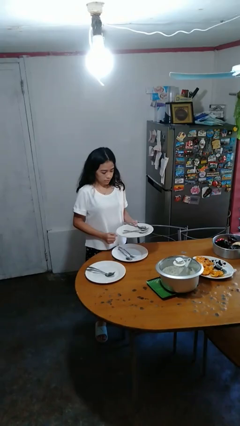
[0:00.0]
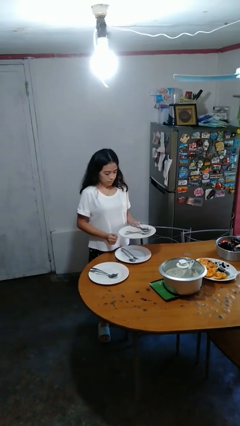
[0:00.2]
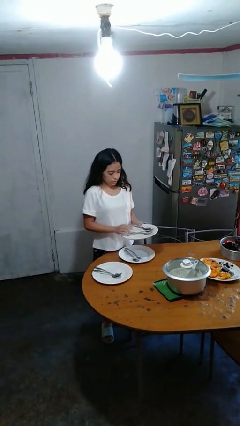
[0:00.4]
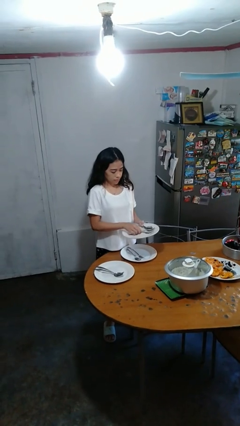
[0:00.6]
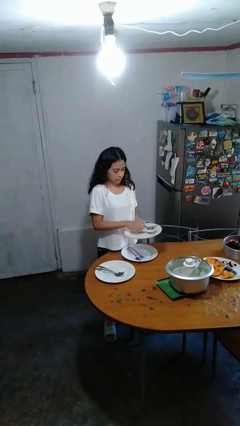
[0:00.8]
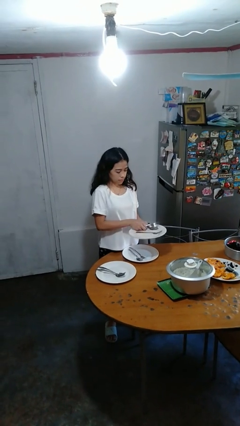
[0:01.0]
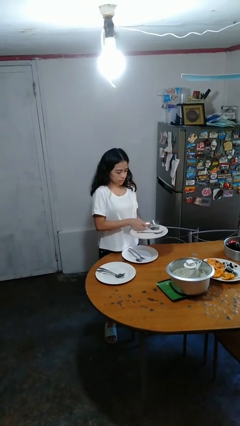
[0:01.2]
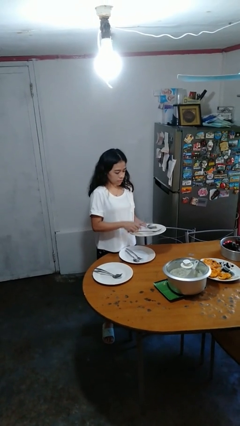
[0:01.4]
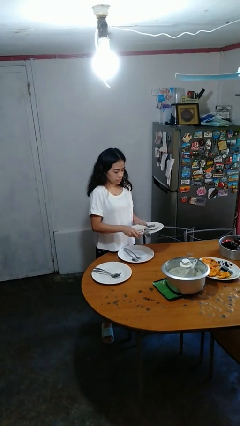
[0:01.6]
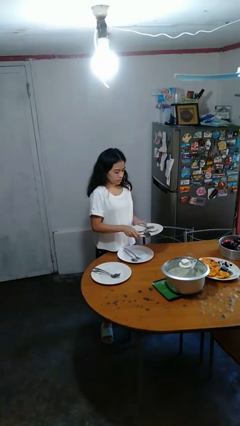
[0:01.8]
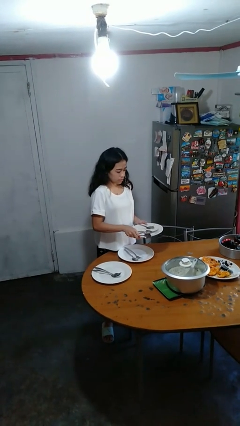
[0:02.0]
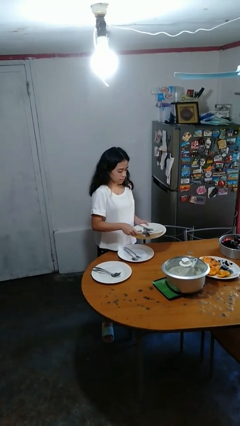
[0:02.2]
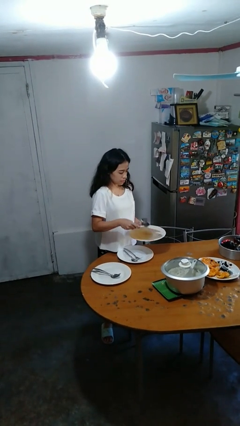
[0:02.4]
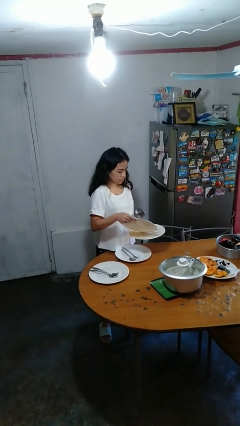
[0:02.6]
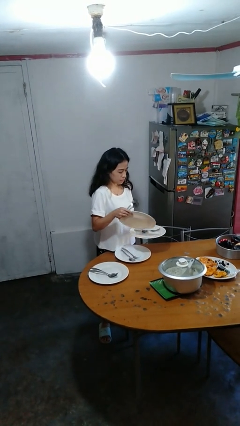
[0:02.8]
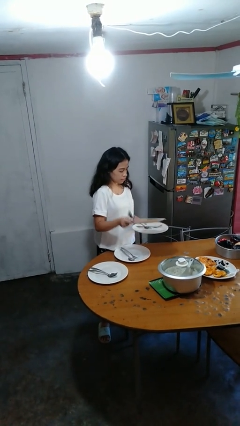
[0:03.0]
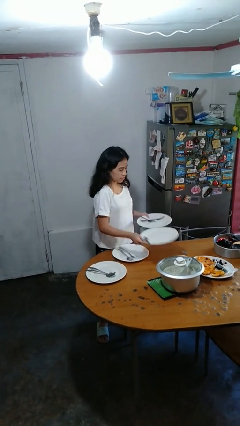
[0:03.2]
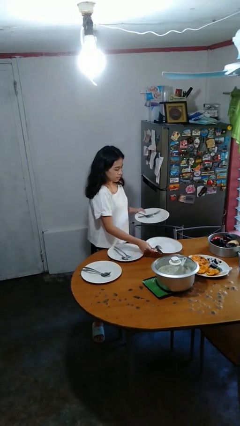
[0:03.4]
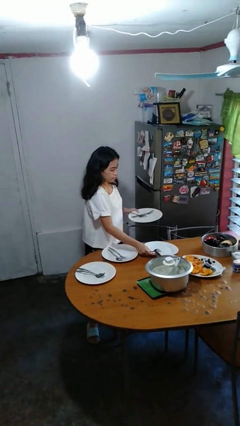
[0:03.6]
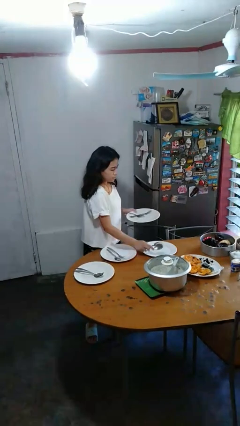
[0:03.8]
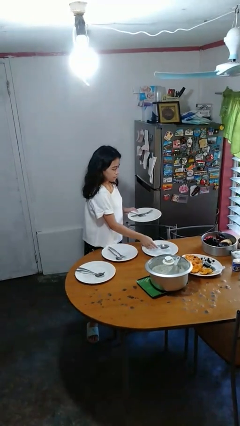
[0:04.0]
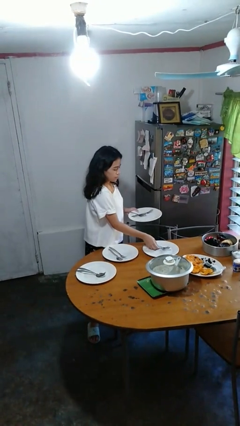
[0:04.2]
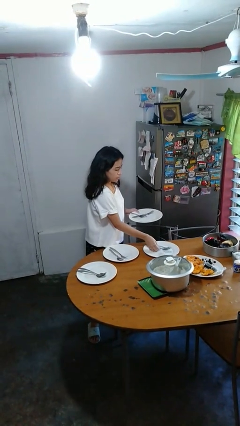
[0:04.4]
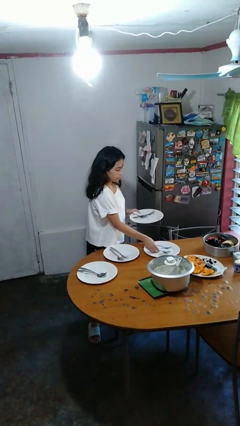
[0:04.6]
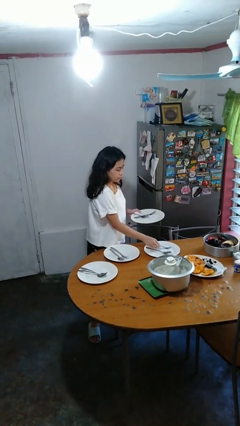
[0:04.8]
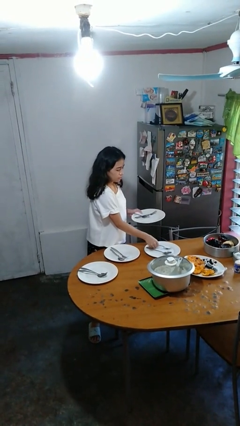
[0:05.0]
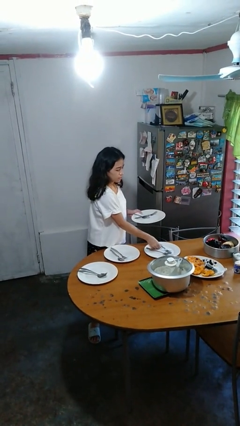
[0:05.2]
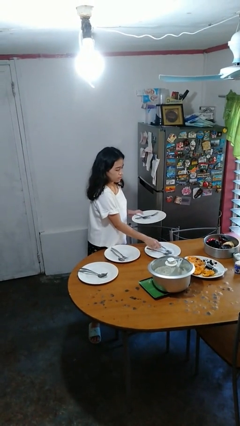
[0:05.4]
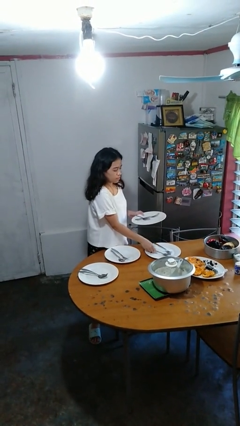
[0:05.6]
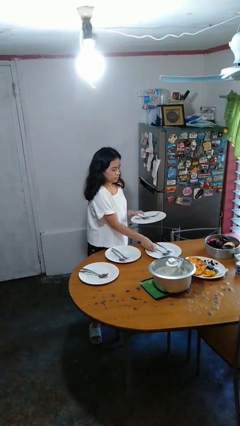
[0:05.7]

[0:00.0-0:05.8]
person sets table

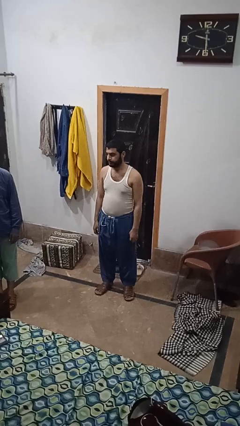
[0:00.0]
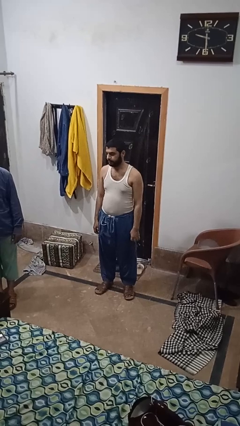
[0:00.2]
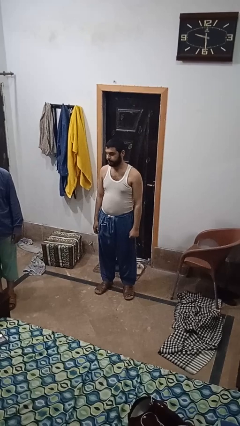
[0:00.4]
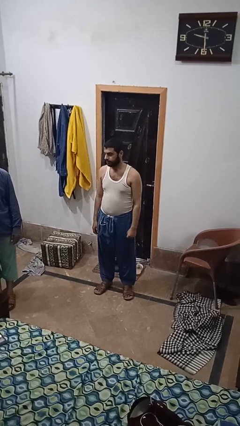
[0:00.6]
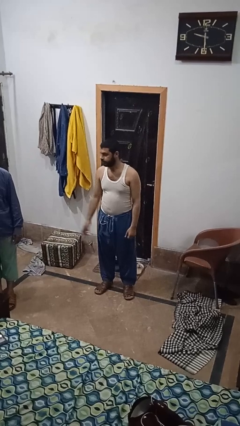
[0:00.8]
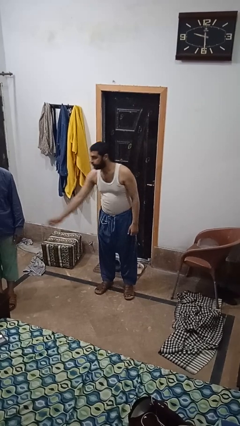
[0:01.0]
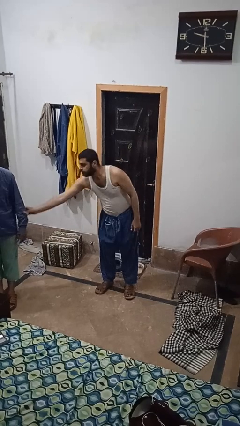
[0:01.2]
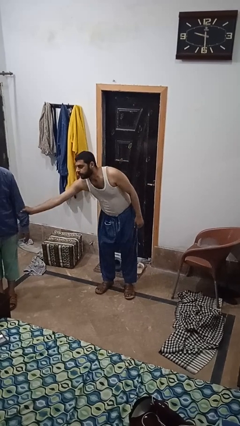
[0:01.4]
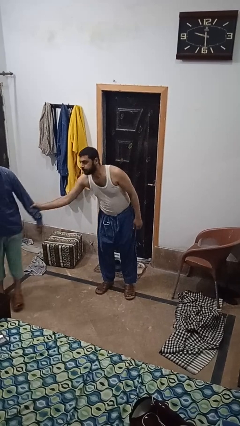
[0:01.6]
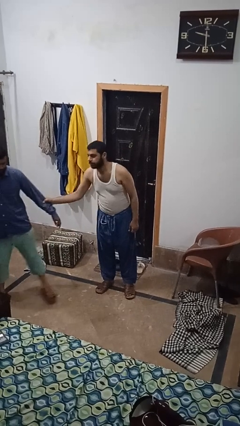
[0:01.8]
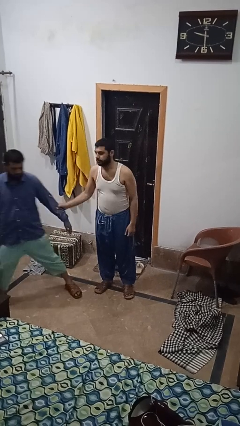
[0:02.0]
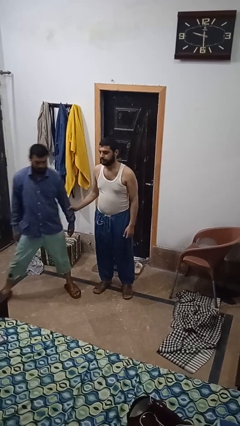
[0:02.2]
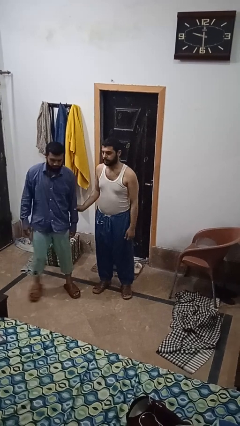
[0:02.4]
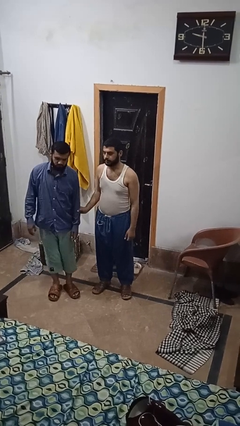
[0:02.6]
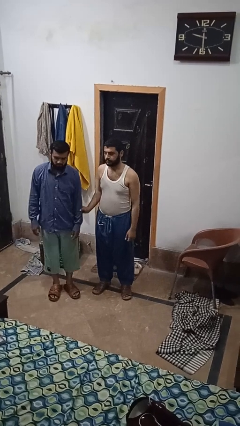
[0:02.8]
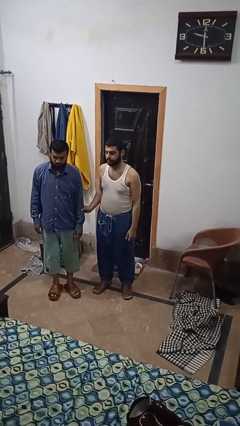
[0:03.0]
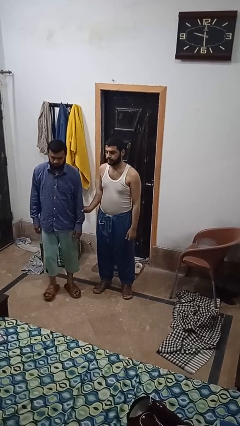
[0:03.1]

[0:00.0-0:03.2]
person grabs person by forearm

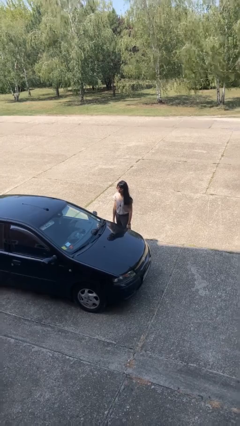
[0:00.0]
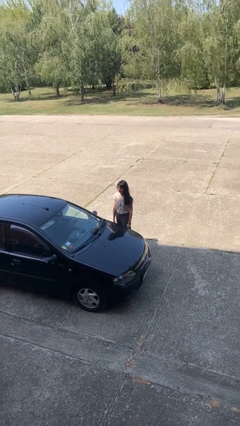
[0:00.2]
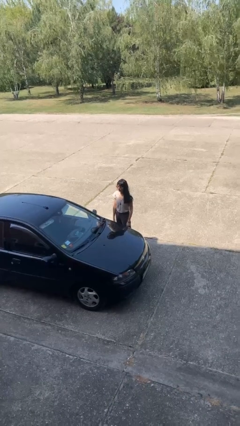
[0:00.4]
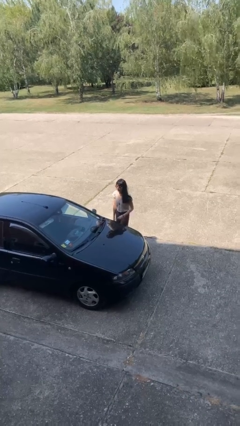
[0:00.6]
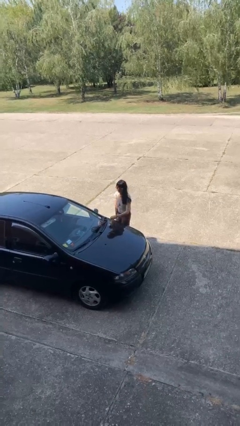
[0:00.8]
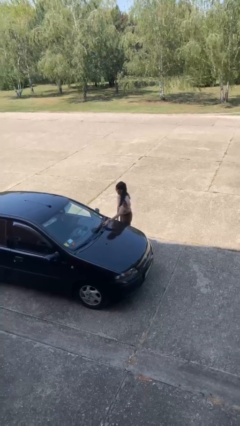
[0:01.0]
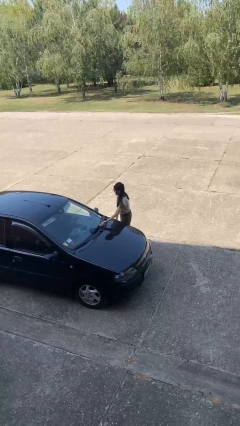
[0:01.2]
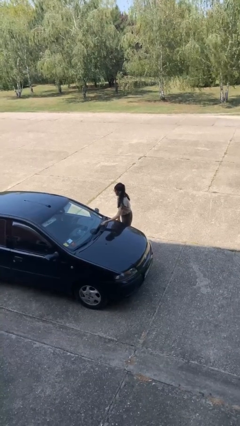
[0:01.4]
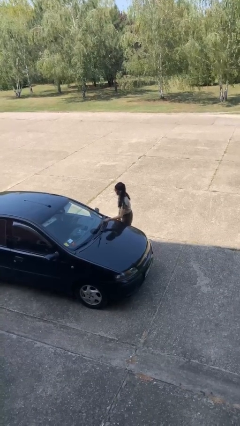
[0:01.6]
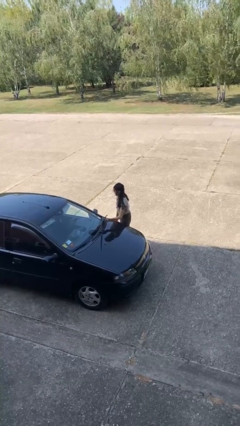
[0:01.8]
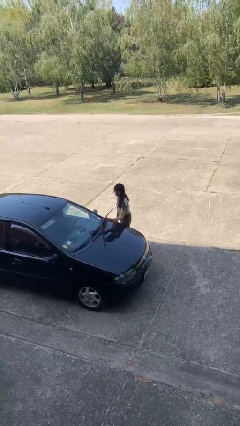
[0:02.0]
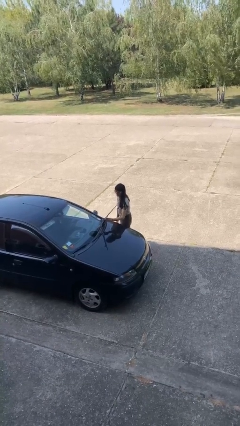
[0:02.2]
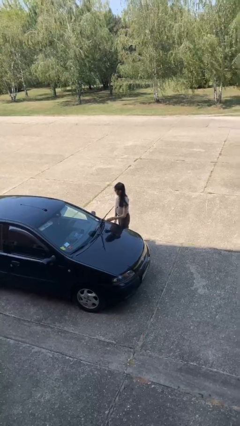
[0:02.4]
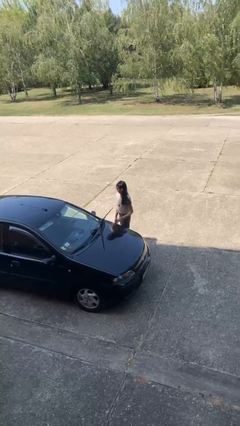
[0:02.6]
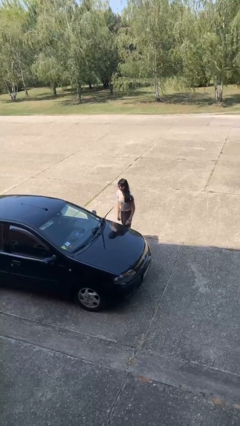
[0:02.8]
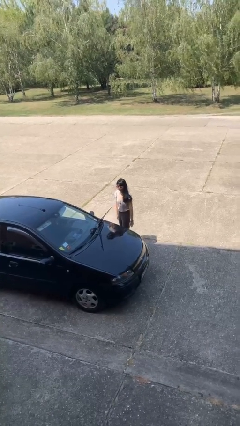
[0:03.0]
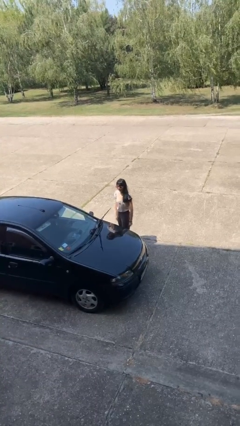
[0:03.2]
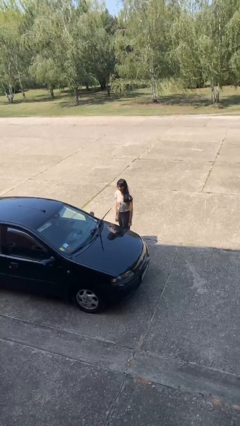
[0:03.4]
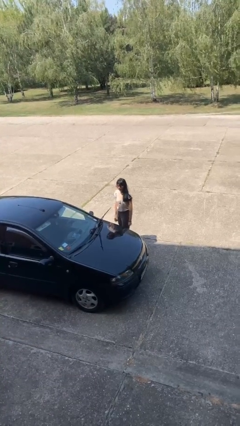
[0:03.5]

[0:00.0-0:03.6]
person flips up car wipers

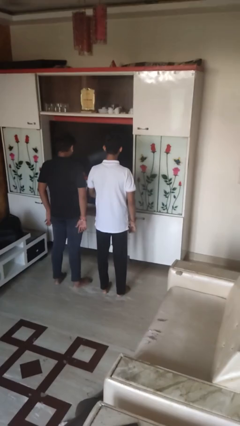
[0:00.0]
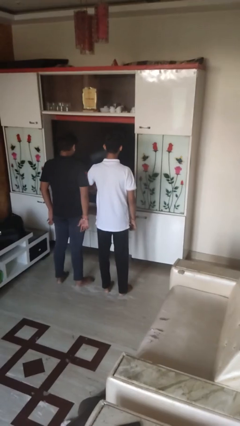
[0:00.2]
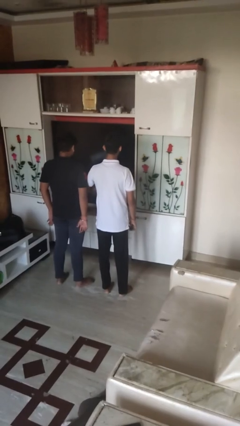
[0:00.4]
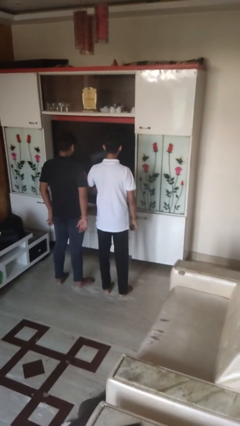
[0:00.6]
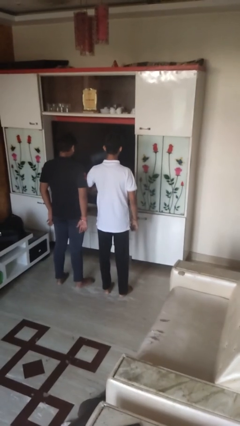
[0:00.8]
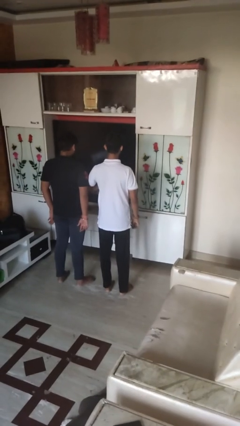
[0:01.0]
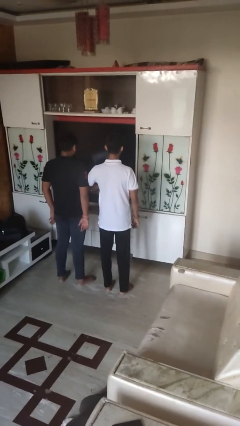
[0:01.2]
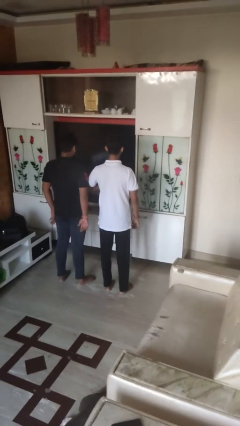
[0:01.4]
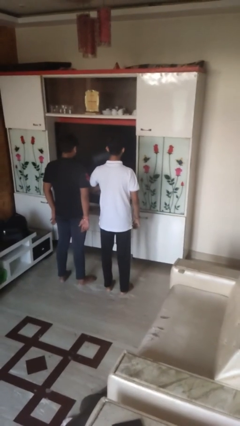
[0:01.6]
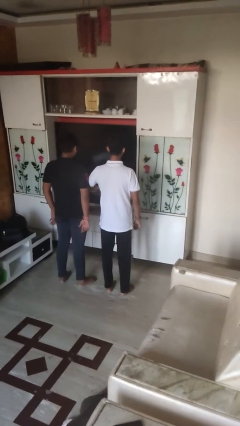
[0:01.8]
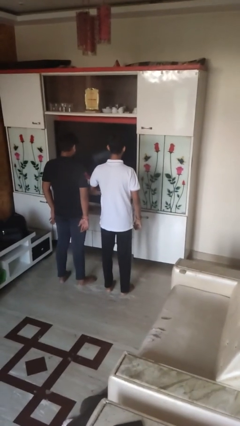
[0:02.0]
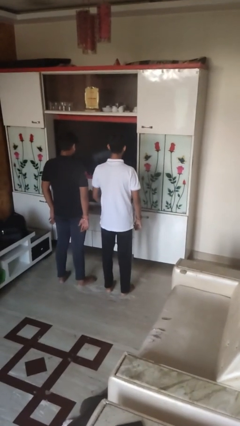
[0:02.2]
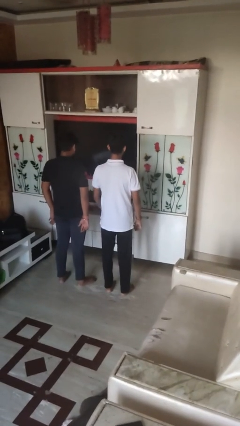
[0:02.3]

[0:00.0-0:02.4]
person nudges person with elbow

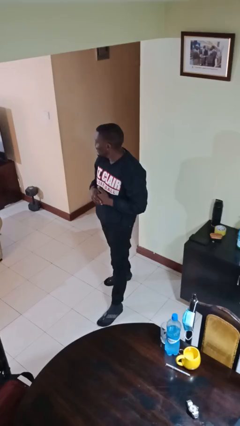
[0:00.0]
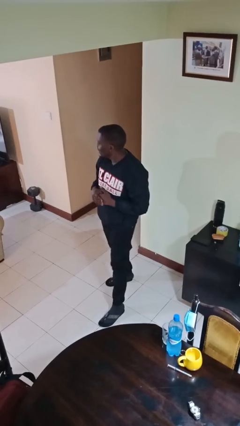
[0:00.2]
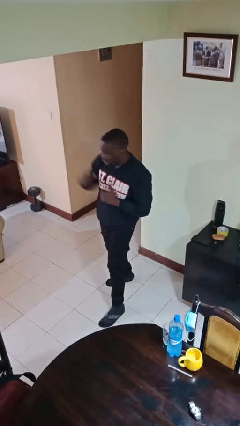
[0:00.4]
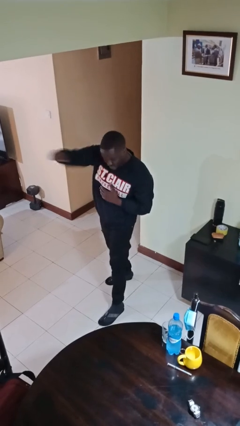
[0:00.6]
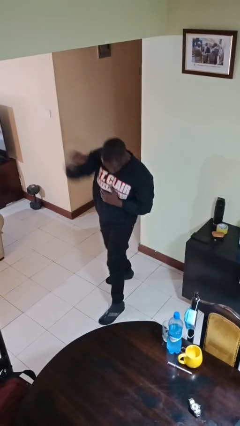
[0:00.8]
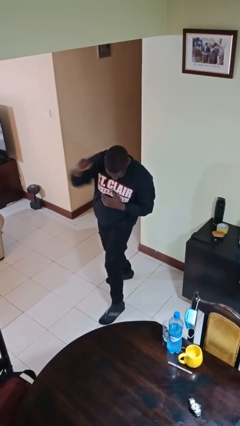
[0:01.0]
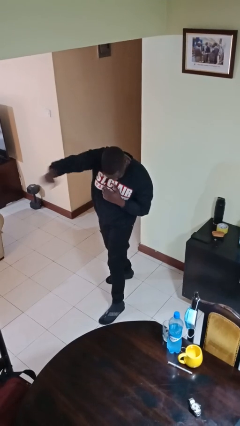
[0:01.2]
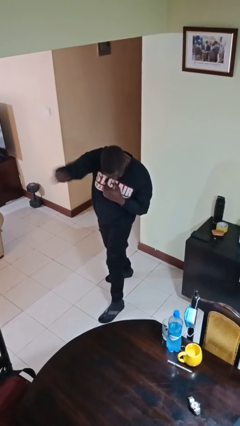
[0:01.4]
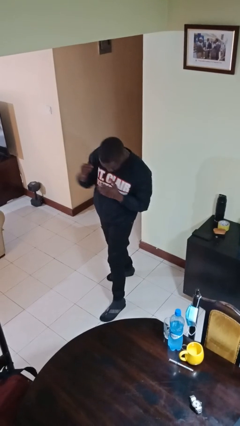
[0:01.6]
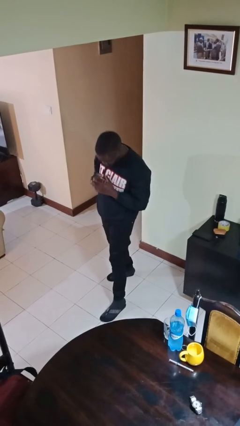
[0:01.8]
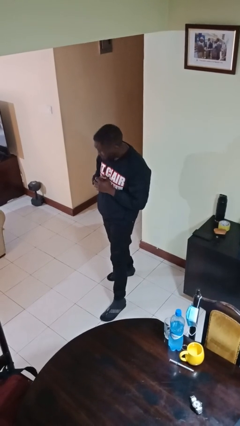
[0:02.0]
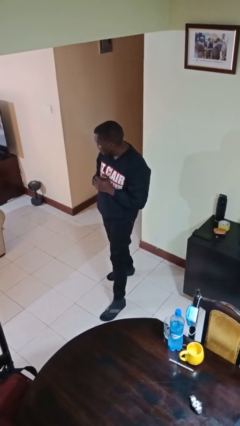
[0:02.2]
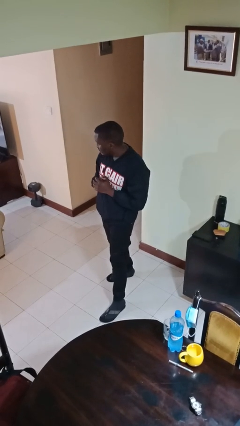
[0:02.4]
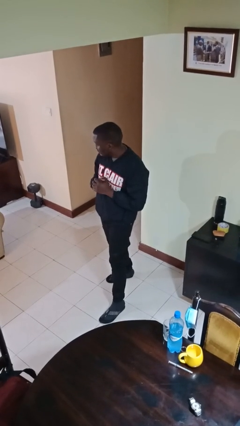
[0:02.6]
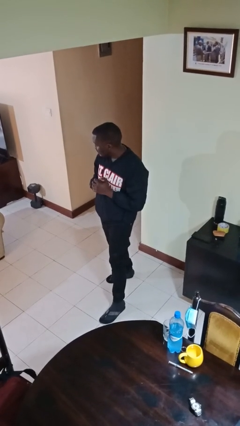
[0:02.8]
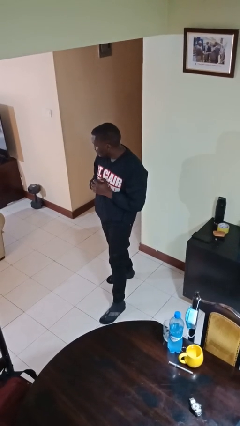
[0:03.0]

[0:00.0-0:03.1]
person punches
